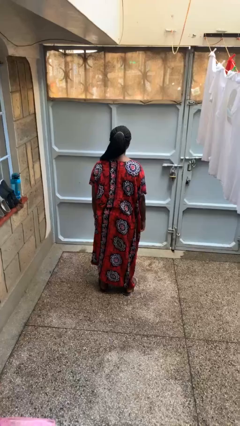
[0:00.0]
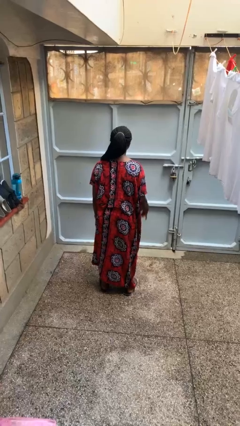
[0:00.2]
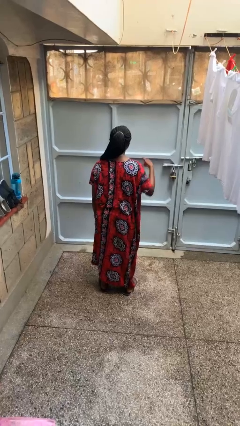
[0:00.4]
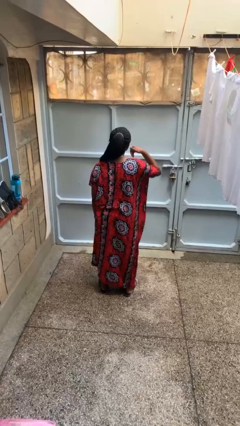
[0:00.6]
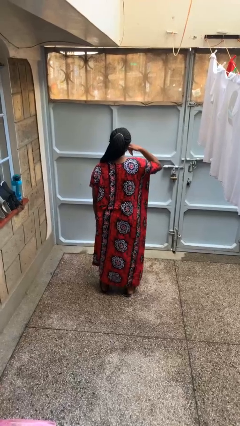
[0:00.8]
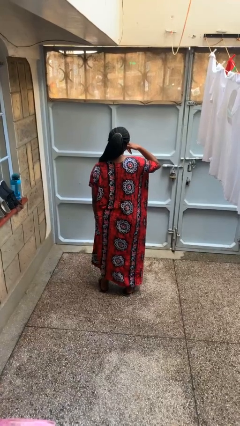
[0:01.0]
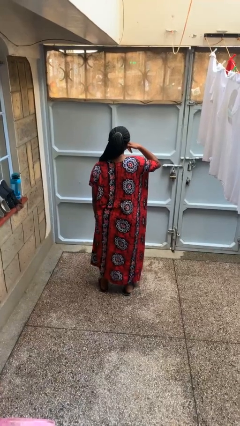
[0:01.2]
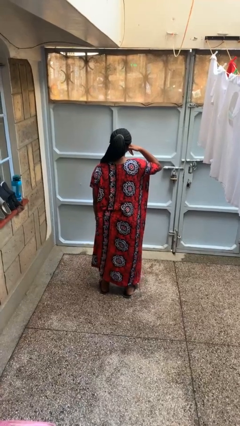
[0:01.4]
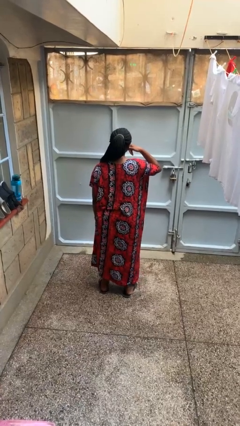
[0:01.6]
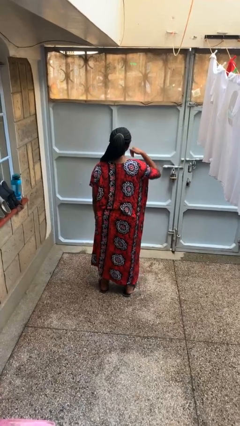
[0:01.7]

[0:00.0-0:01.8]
person gestures call me

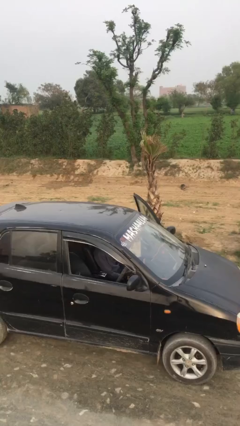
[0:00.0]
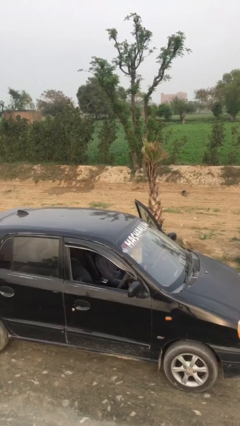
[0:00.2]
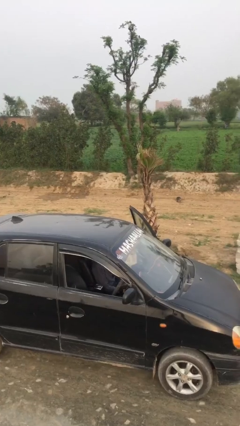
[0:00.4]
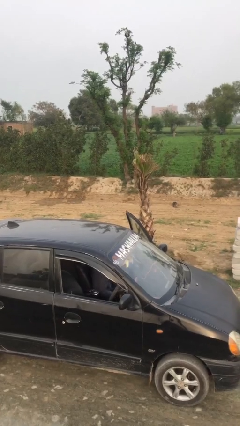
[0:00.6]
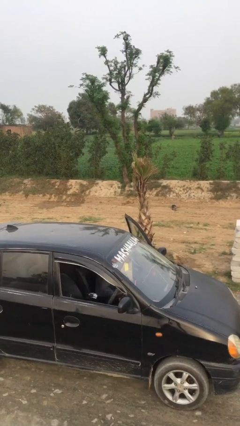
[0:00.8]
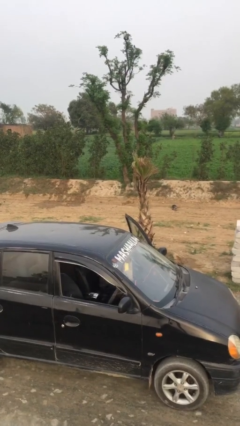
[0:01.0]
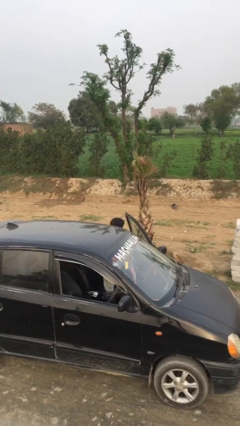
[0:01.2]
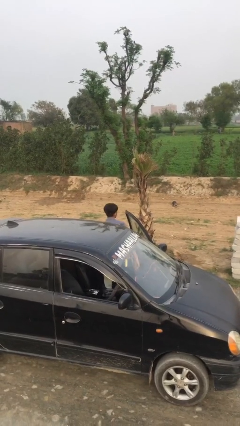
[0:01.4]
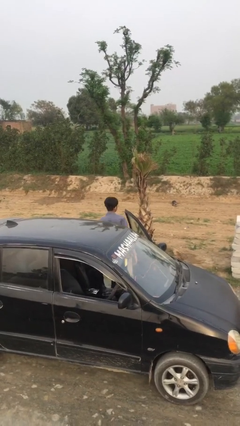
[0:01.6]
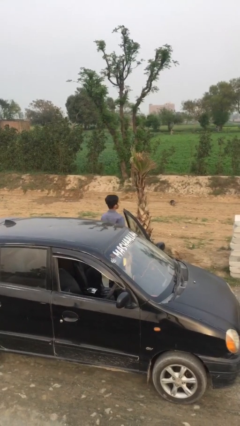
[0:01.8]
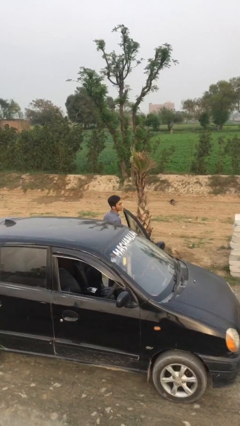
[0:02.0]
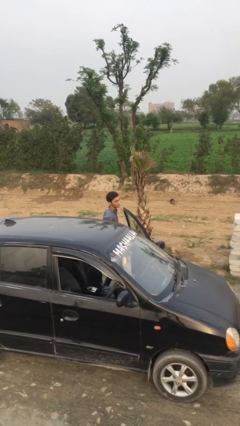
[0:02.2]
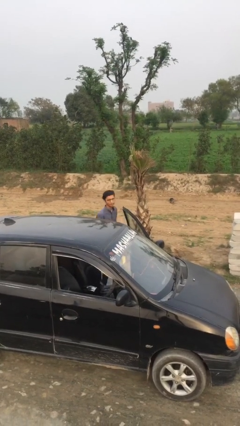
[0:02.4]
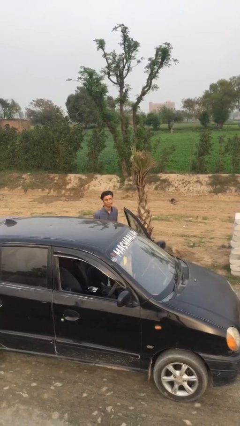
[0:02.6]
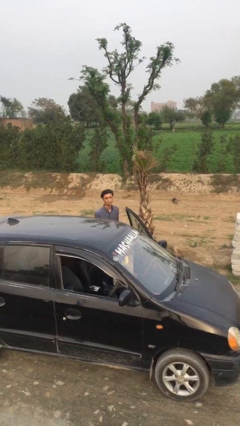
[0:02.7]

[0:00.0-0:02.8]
person exits car

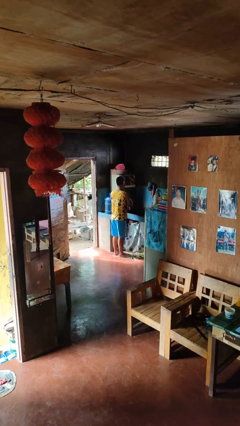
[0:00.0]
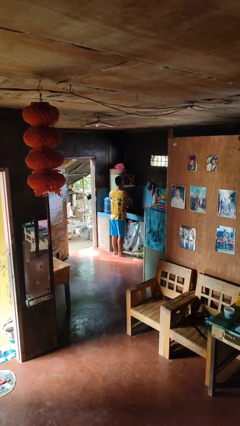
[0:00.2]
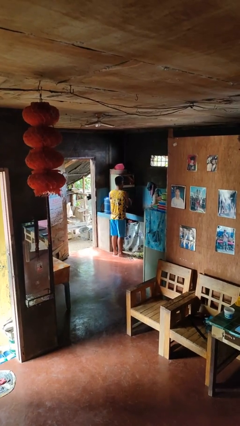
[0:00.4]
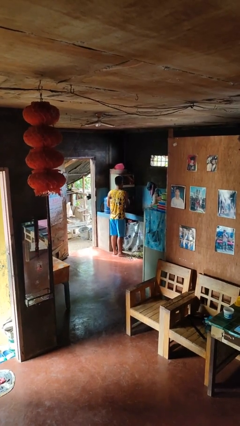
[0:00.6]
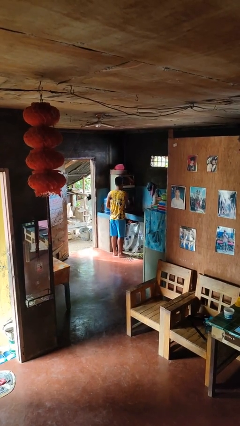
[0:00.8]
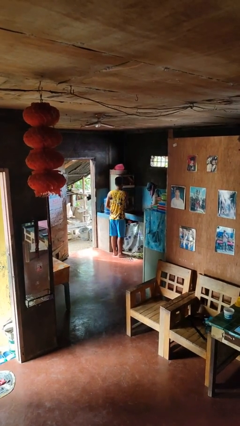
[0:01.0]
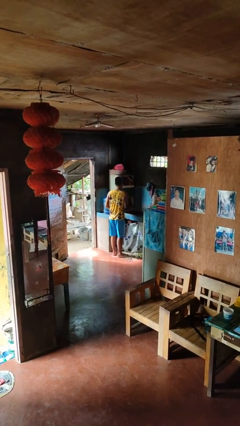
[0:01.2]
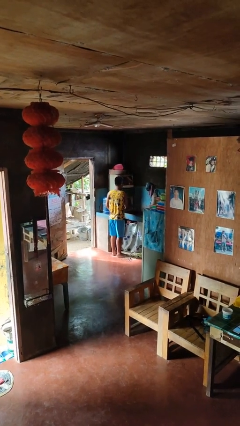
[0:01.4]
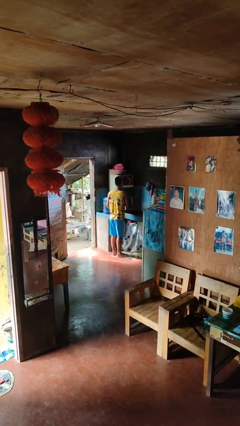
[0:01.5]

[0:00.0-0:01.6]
person closes dishwasher

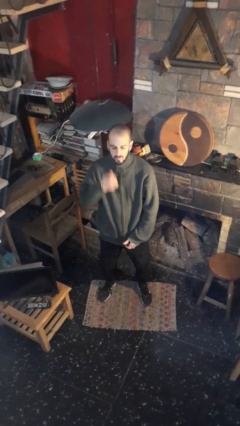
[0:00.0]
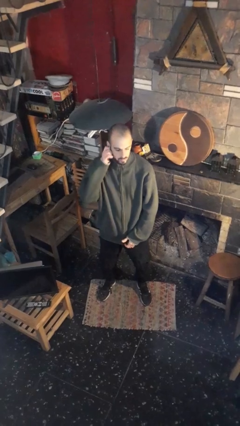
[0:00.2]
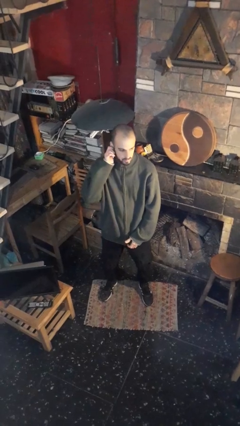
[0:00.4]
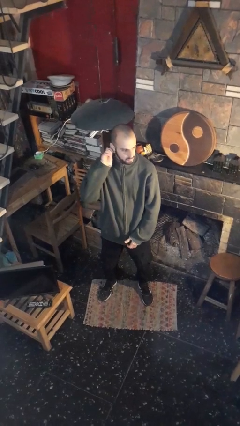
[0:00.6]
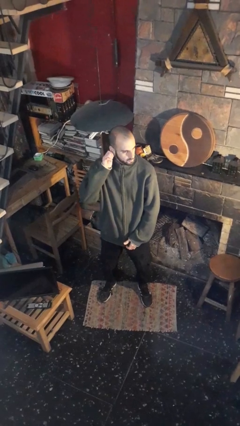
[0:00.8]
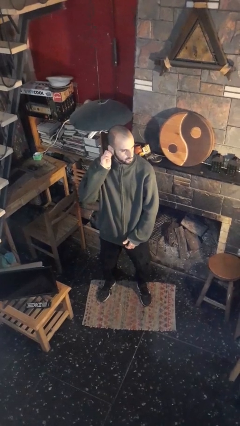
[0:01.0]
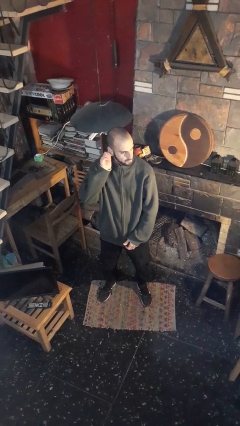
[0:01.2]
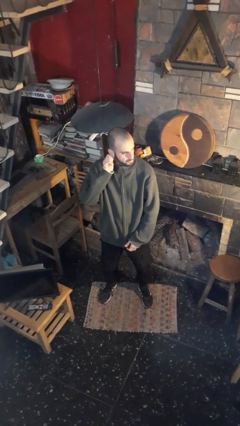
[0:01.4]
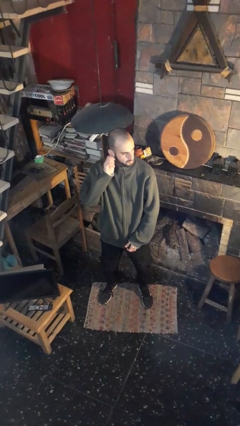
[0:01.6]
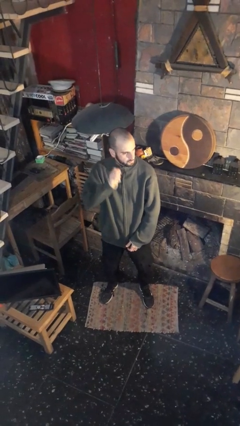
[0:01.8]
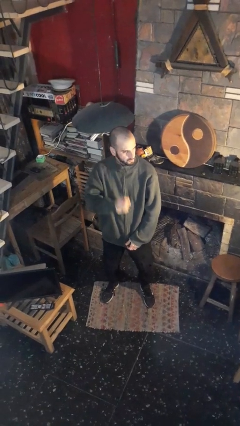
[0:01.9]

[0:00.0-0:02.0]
person touches earlobe

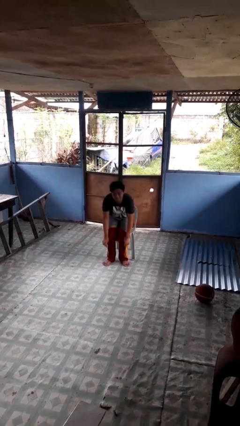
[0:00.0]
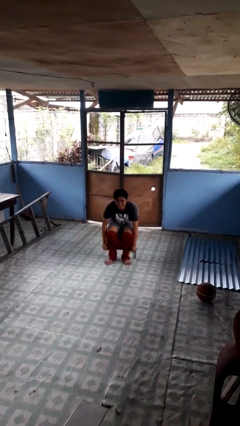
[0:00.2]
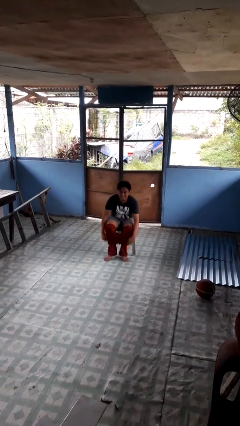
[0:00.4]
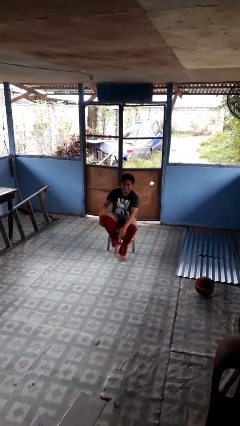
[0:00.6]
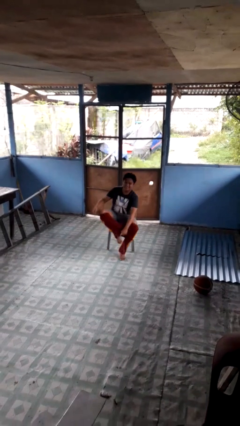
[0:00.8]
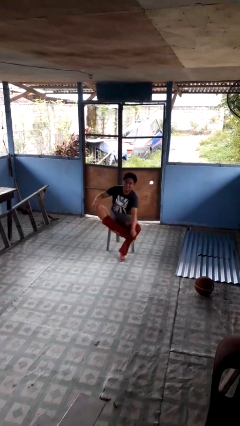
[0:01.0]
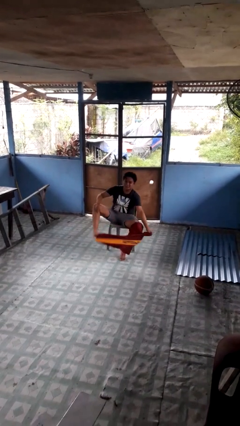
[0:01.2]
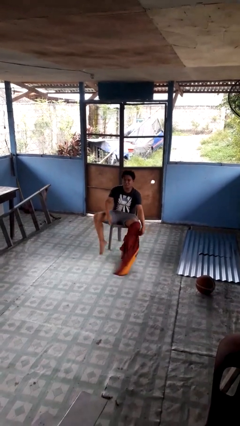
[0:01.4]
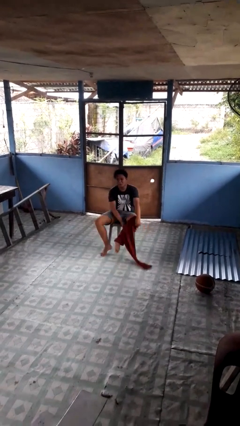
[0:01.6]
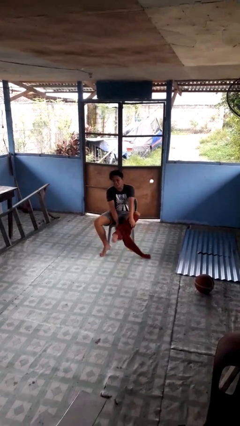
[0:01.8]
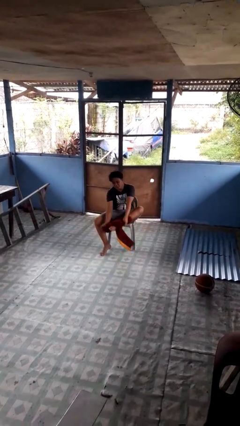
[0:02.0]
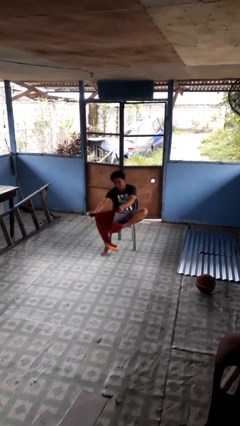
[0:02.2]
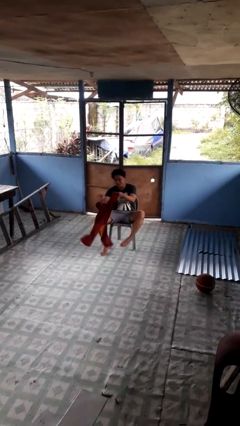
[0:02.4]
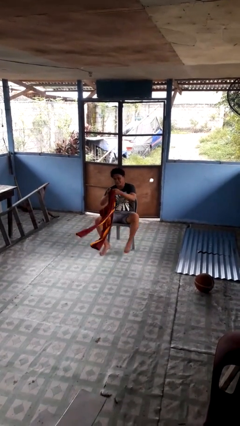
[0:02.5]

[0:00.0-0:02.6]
person takes off pants

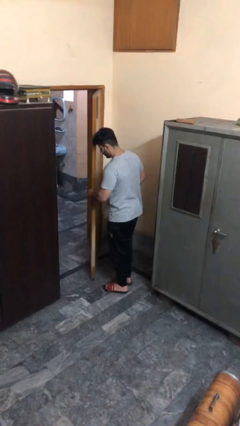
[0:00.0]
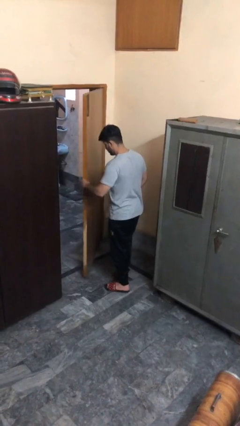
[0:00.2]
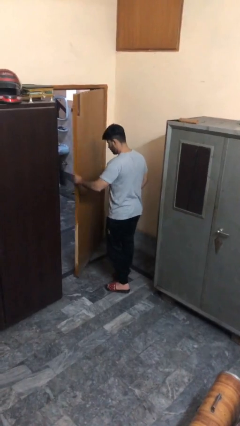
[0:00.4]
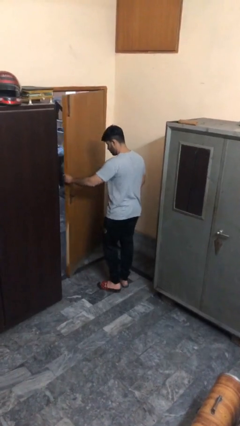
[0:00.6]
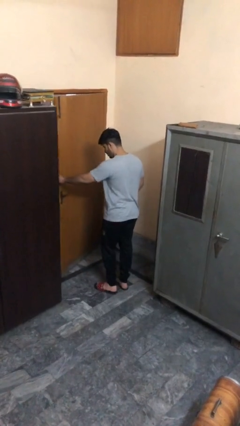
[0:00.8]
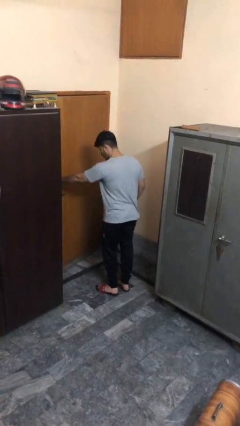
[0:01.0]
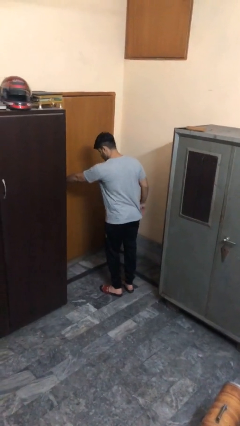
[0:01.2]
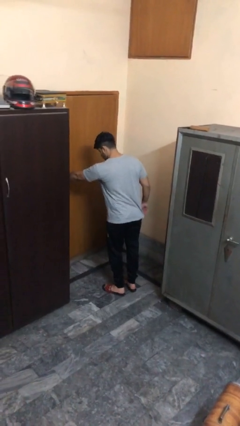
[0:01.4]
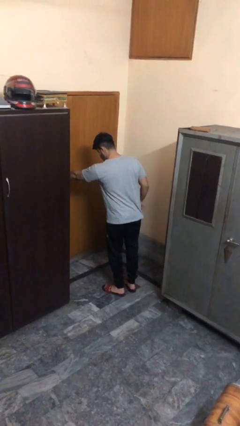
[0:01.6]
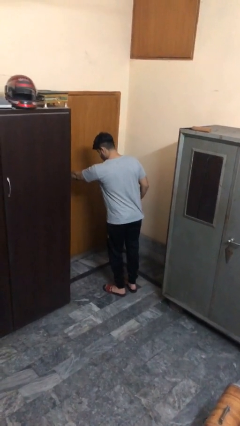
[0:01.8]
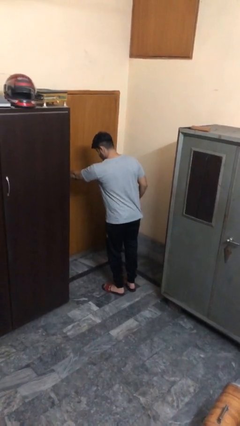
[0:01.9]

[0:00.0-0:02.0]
person closes facility door

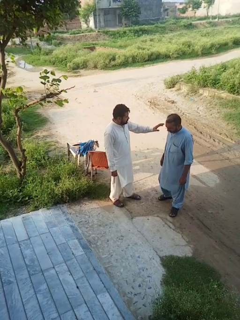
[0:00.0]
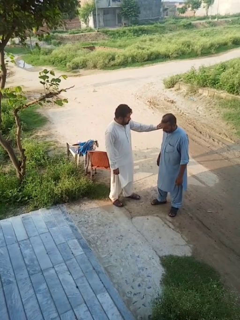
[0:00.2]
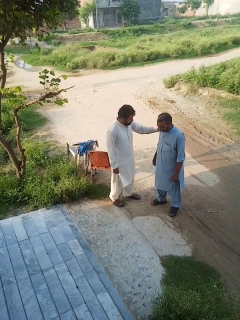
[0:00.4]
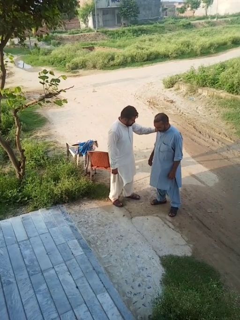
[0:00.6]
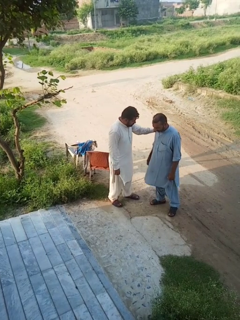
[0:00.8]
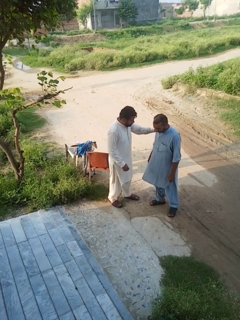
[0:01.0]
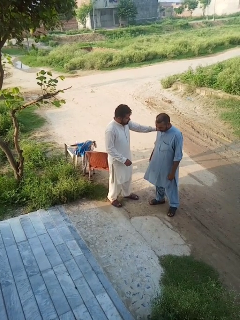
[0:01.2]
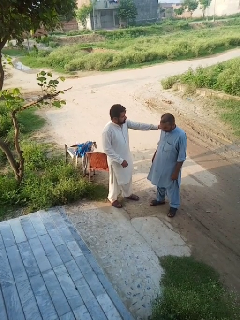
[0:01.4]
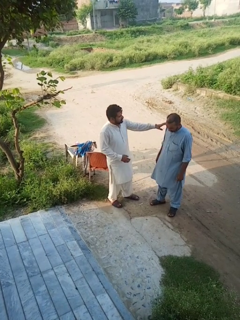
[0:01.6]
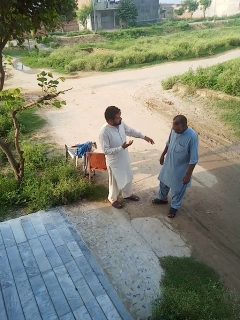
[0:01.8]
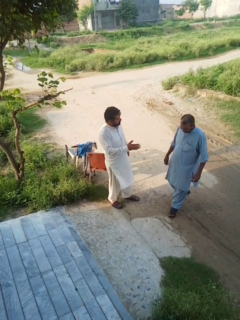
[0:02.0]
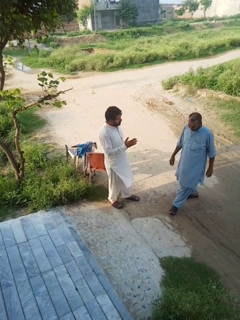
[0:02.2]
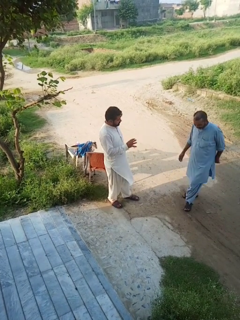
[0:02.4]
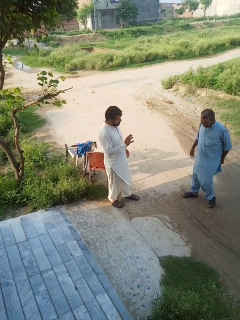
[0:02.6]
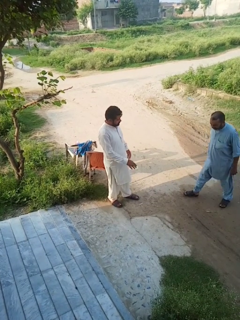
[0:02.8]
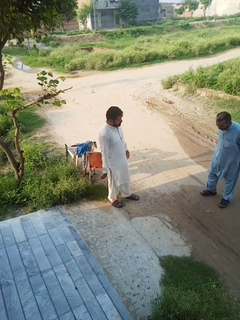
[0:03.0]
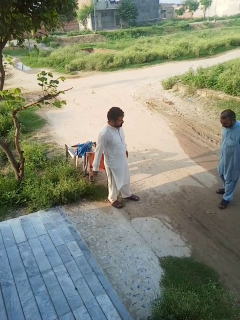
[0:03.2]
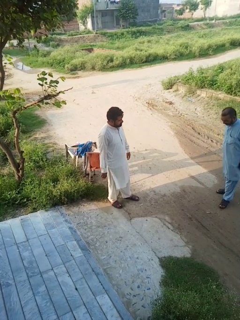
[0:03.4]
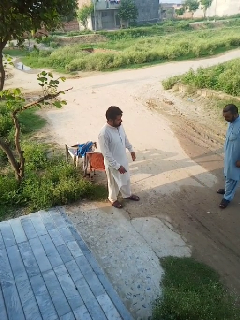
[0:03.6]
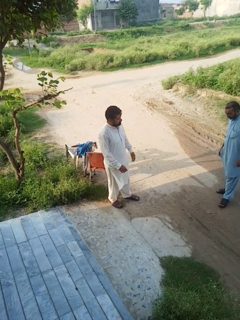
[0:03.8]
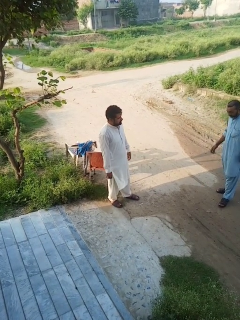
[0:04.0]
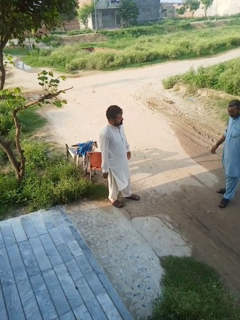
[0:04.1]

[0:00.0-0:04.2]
person shoves person

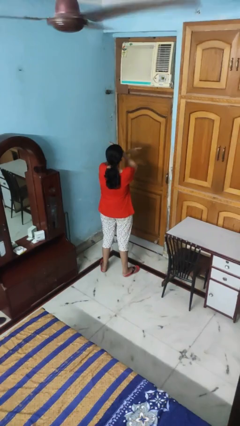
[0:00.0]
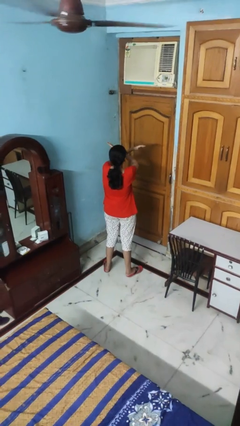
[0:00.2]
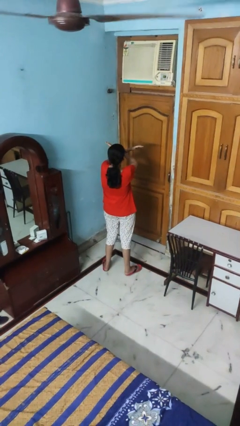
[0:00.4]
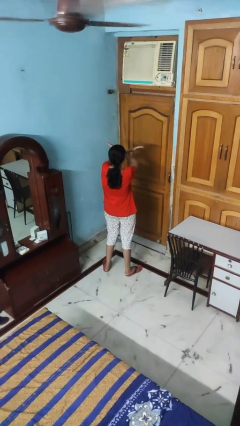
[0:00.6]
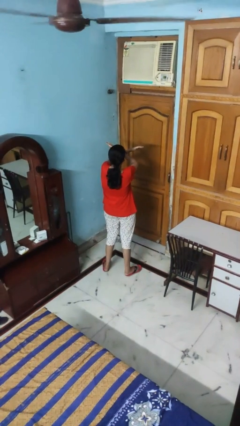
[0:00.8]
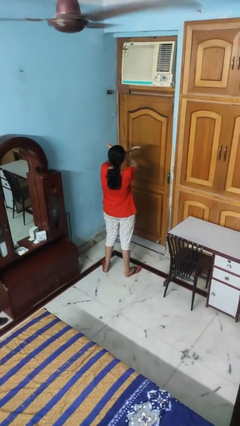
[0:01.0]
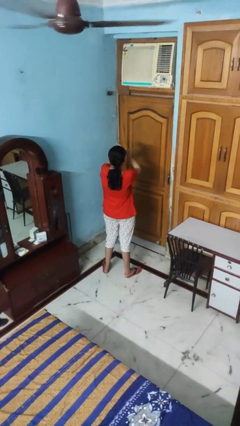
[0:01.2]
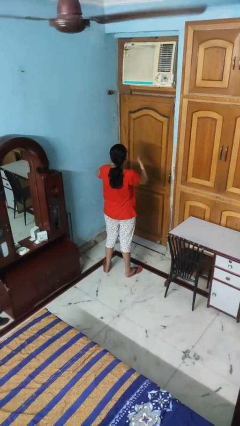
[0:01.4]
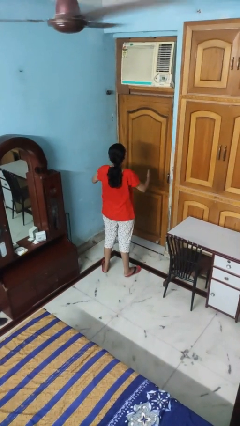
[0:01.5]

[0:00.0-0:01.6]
person gestures arms x
